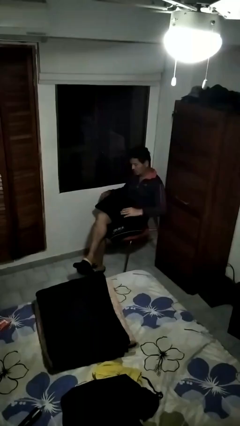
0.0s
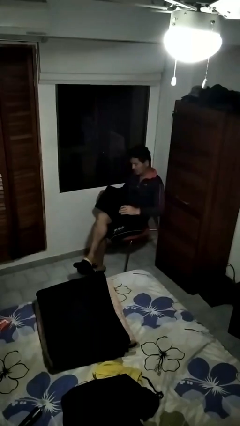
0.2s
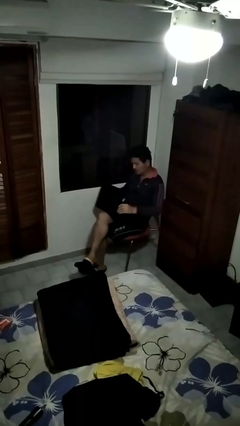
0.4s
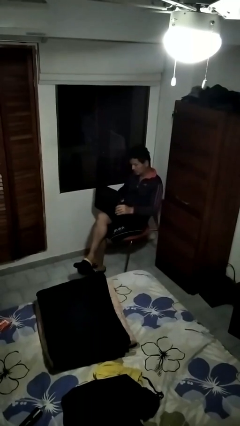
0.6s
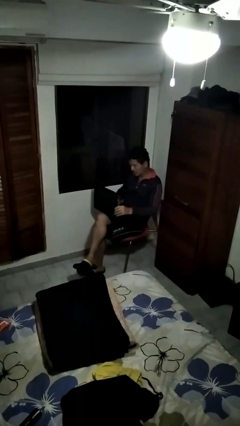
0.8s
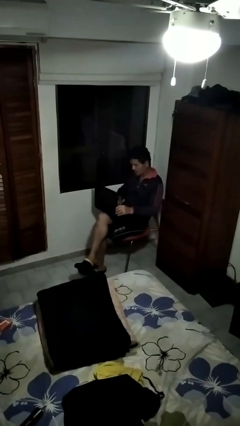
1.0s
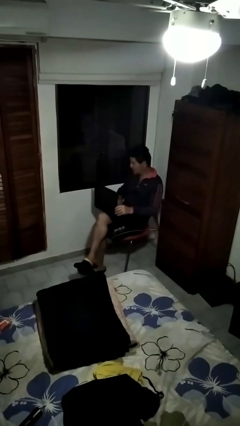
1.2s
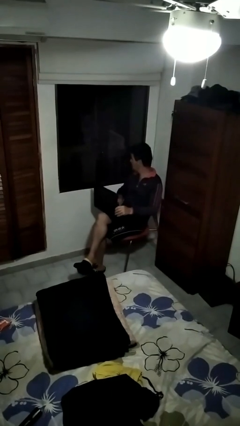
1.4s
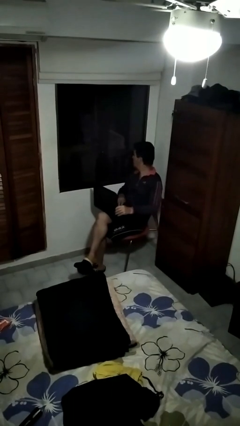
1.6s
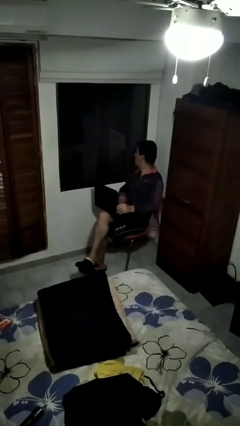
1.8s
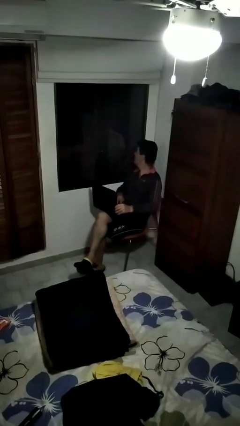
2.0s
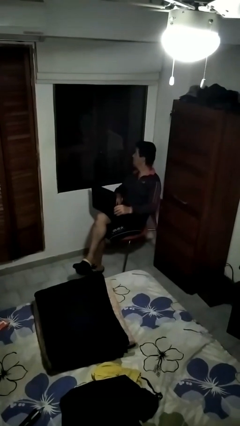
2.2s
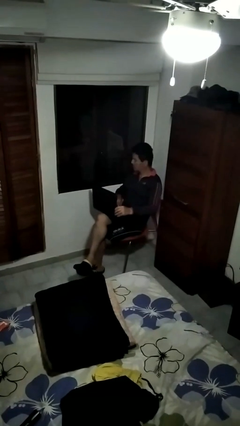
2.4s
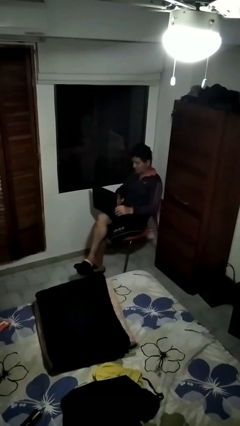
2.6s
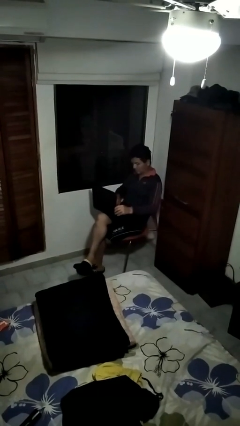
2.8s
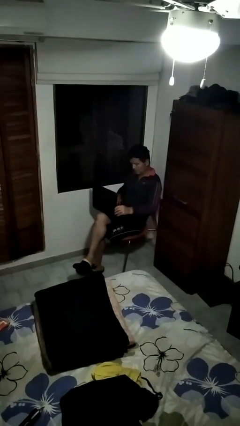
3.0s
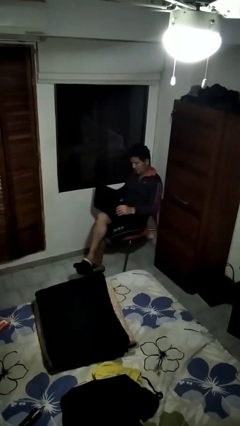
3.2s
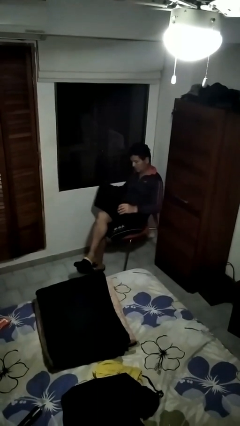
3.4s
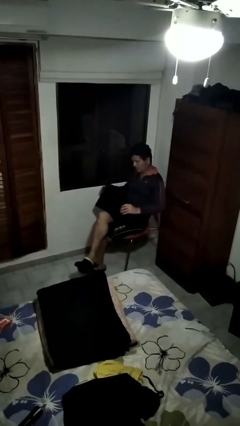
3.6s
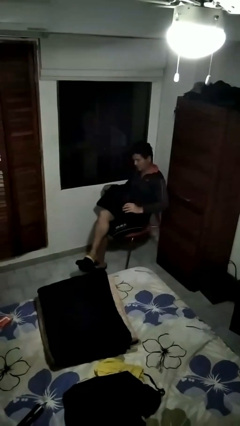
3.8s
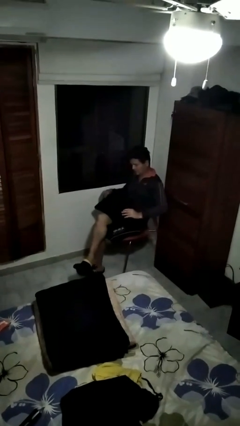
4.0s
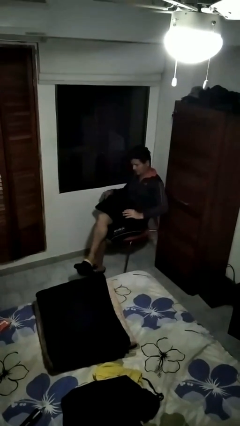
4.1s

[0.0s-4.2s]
person interacts with laptop

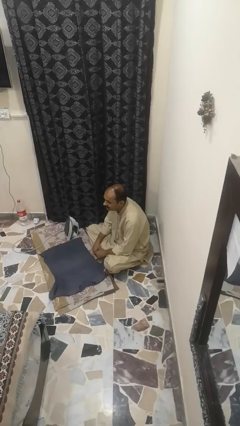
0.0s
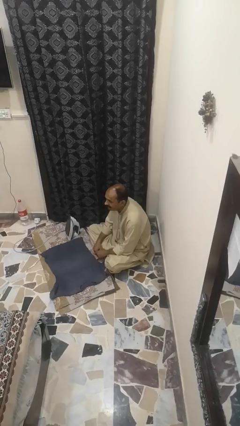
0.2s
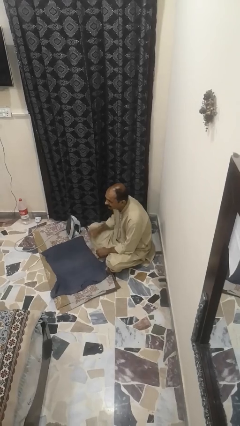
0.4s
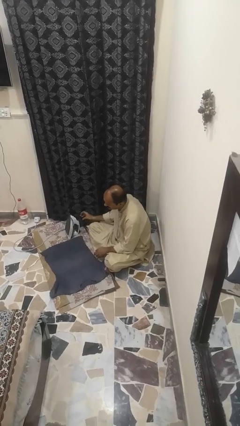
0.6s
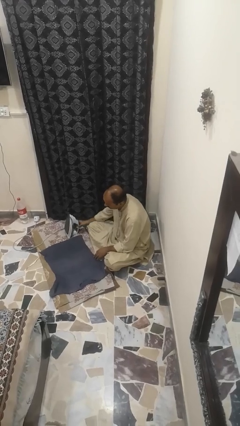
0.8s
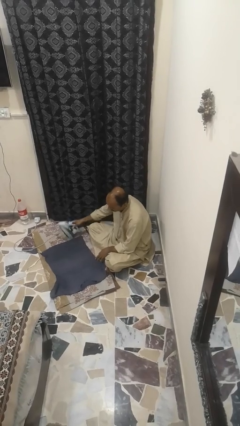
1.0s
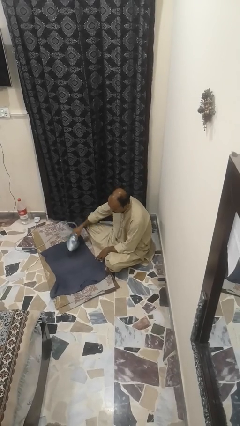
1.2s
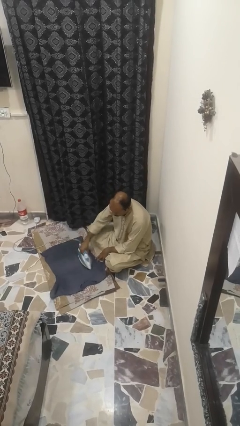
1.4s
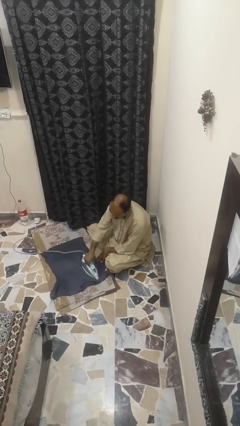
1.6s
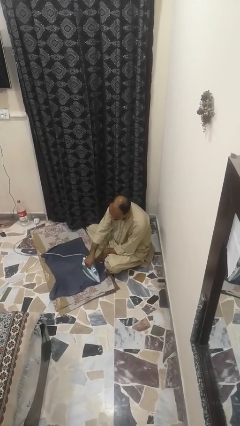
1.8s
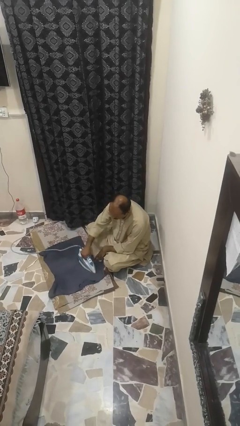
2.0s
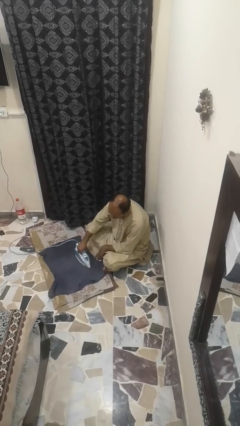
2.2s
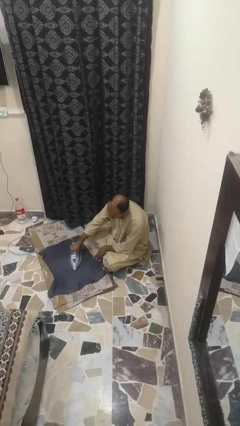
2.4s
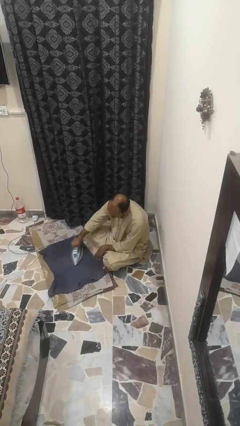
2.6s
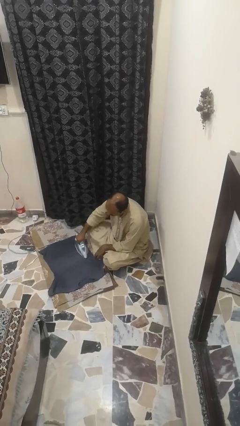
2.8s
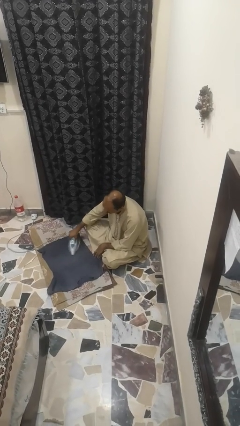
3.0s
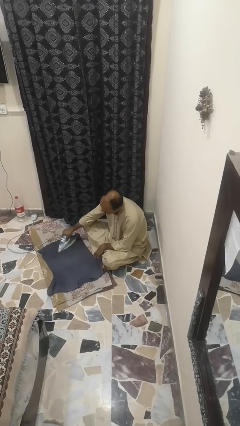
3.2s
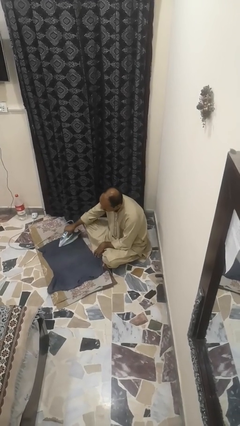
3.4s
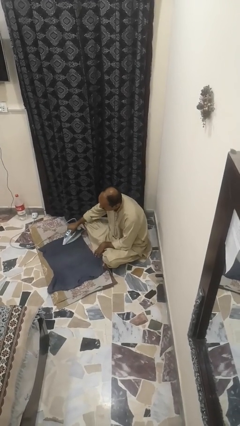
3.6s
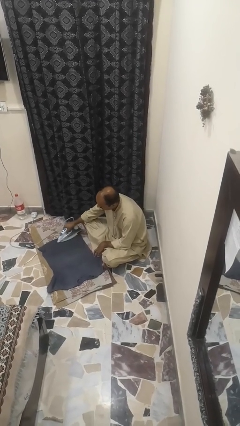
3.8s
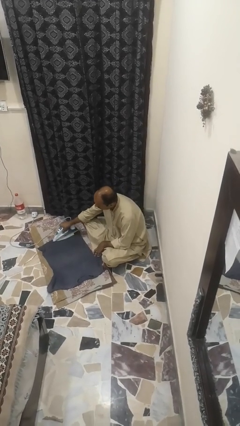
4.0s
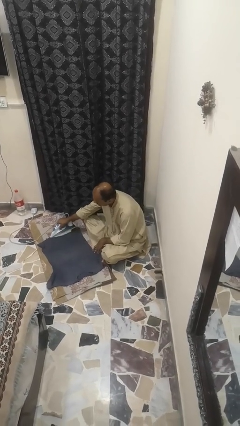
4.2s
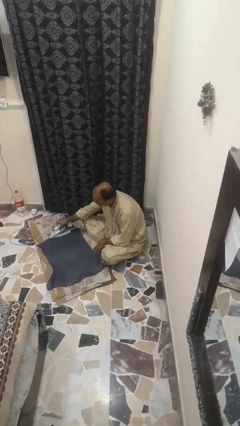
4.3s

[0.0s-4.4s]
person irons clothes

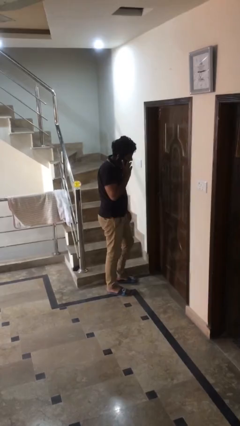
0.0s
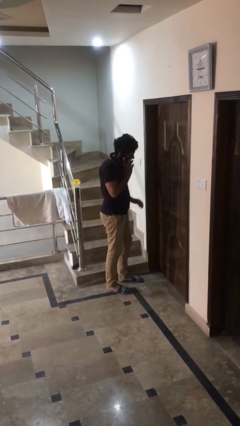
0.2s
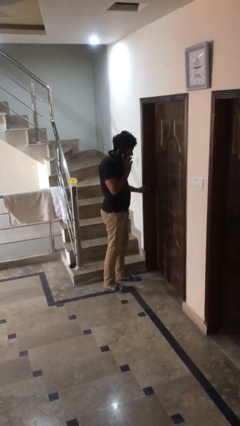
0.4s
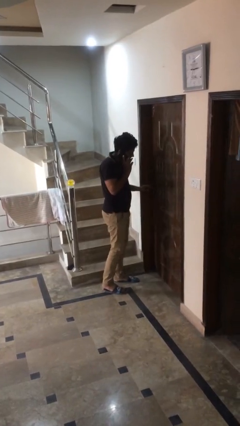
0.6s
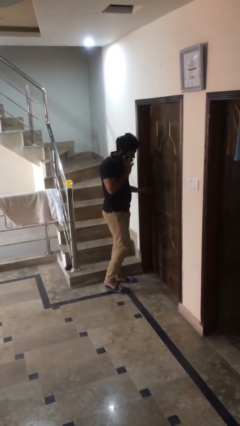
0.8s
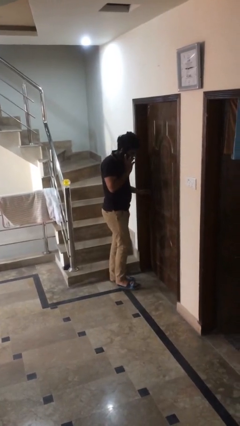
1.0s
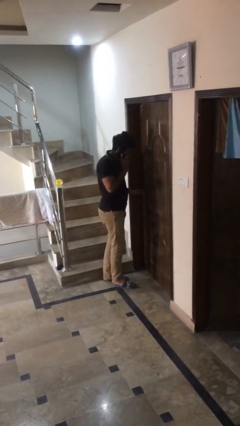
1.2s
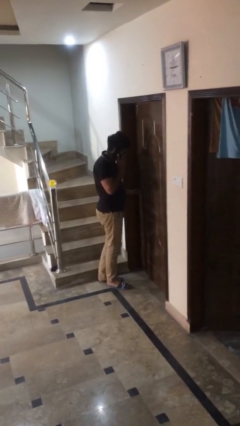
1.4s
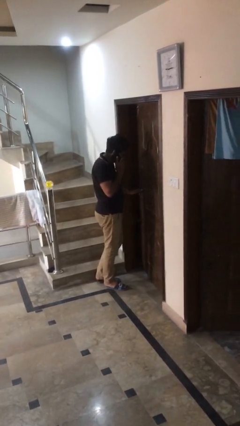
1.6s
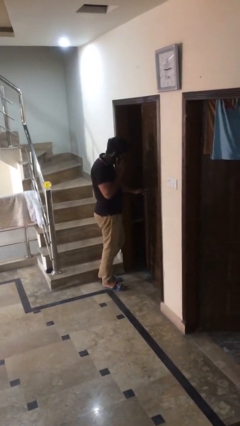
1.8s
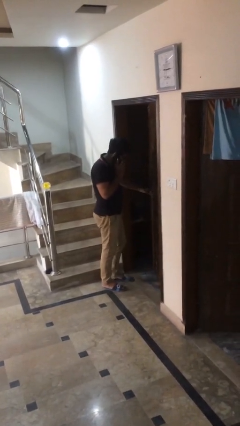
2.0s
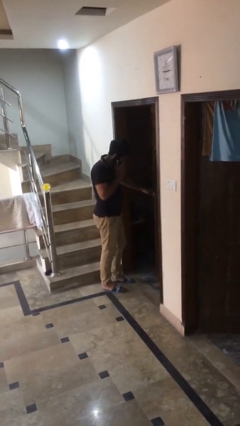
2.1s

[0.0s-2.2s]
person opens facility door

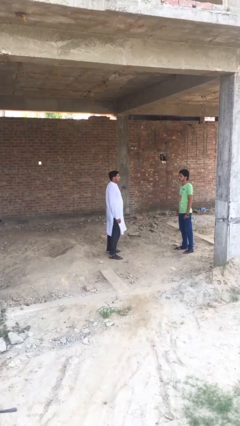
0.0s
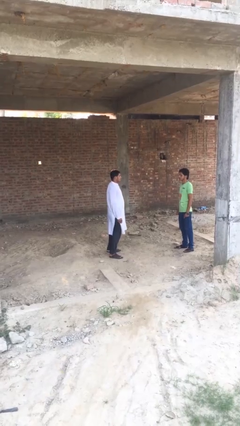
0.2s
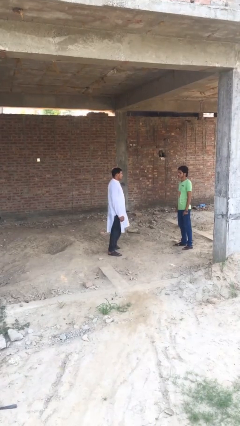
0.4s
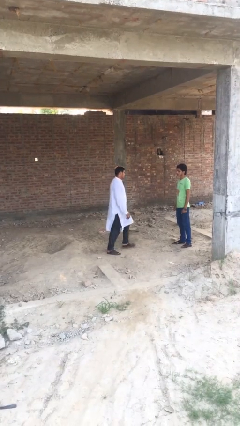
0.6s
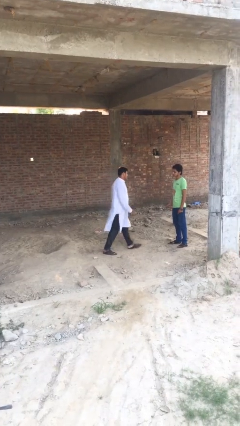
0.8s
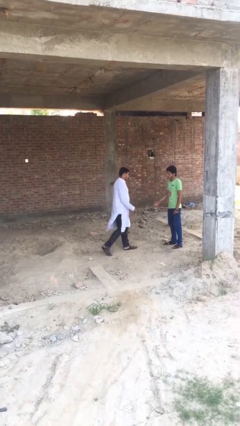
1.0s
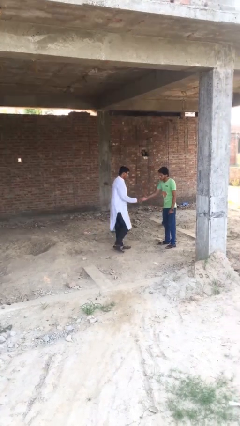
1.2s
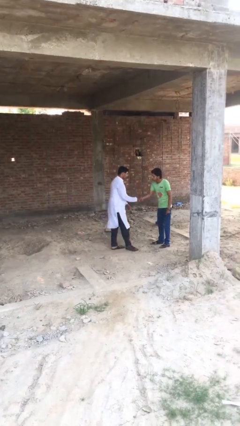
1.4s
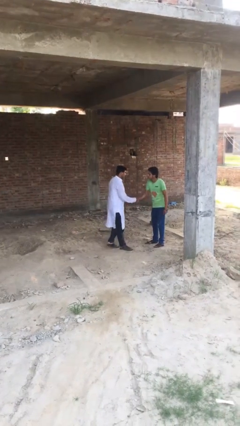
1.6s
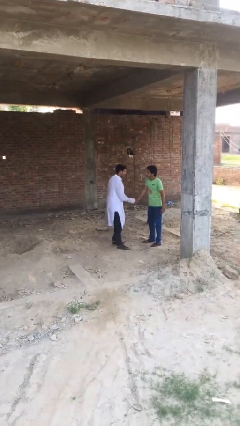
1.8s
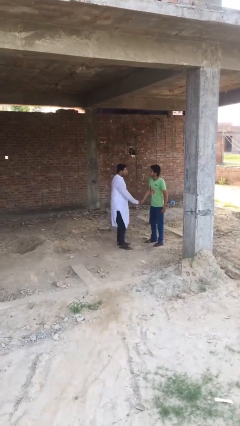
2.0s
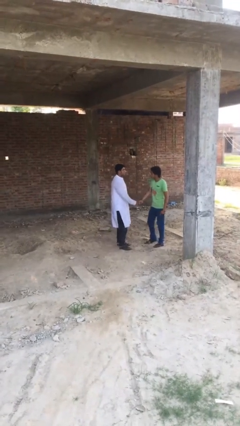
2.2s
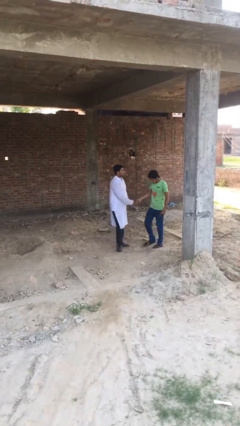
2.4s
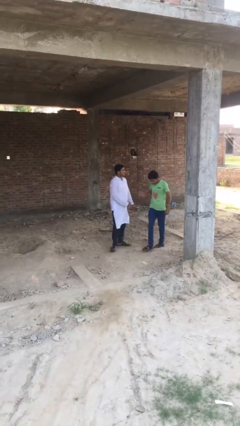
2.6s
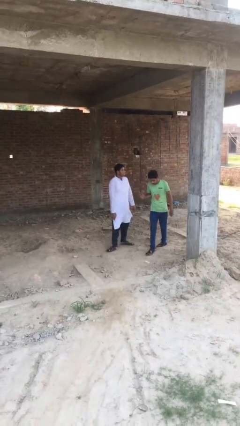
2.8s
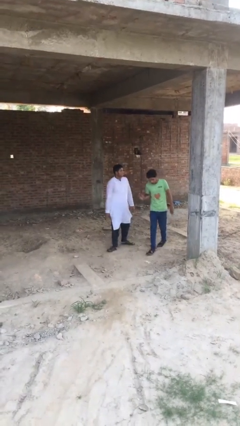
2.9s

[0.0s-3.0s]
person shakes hand

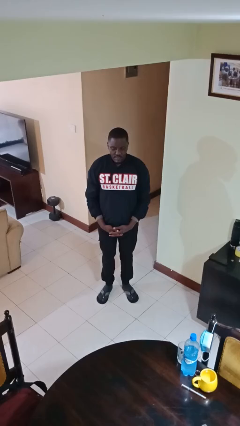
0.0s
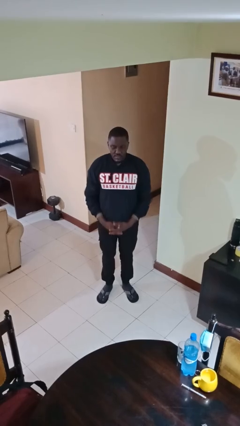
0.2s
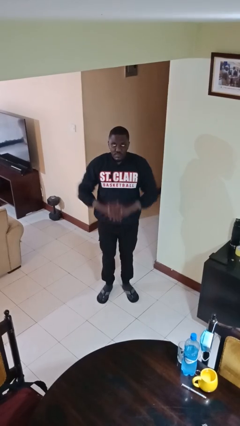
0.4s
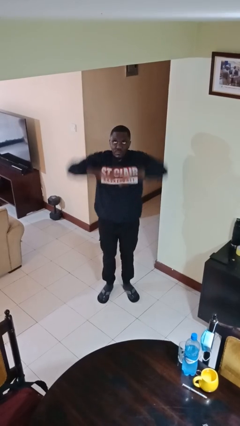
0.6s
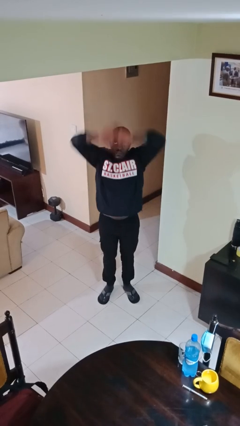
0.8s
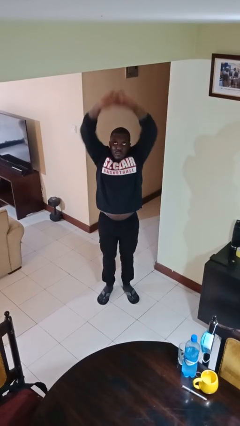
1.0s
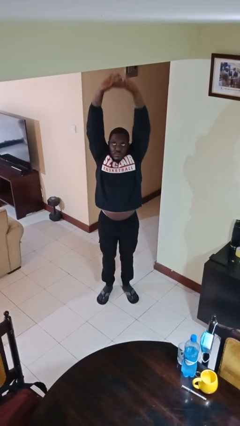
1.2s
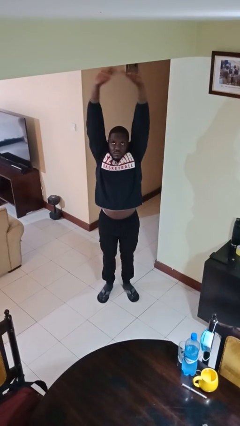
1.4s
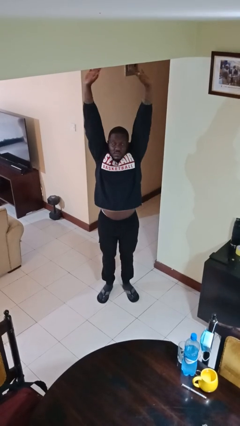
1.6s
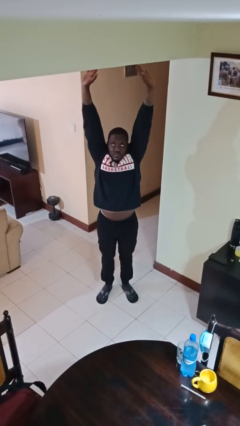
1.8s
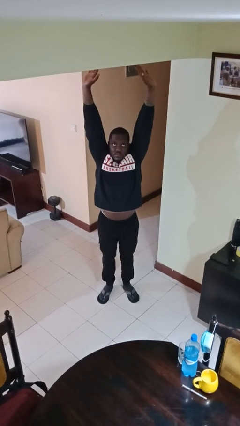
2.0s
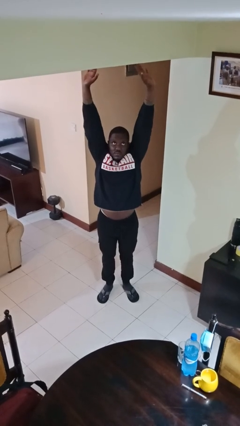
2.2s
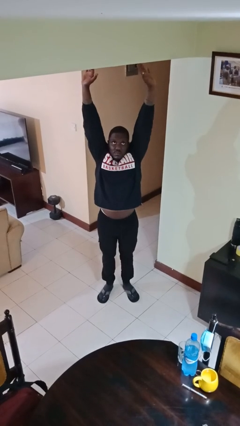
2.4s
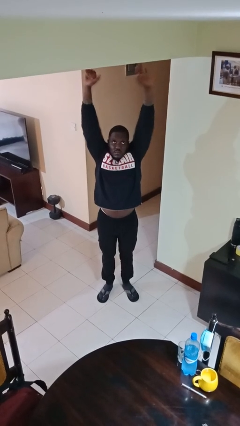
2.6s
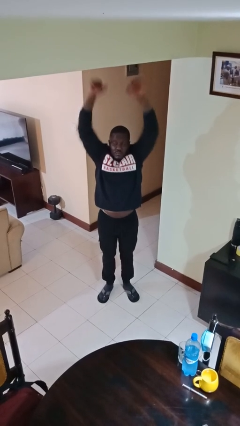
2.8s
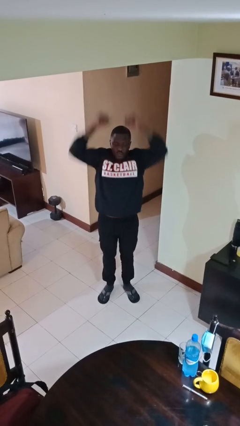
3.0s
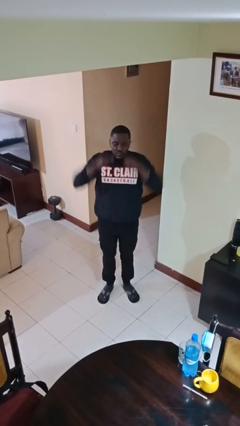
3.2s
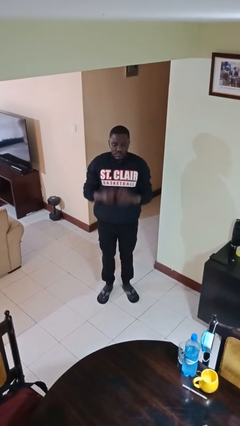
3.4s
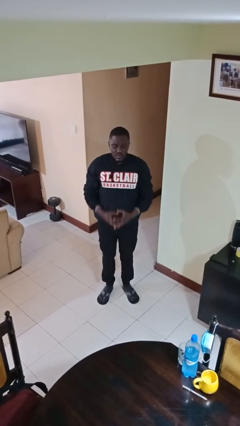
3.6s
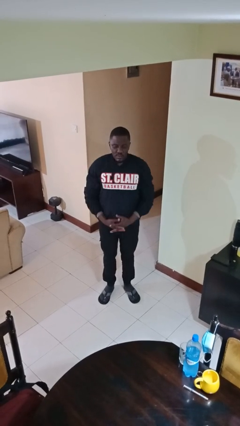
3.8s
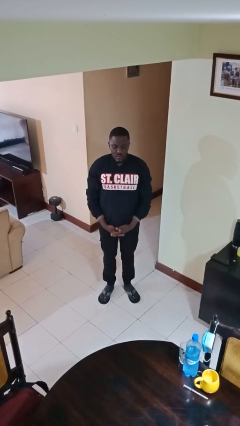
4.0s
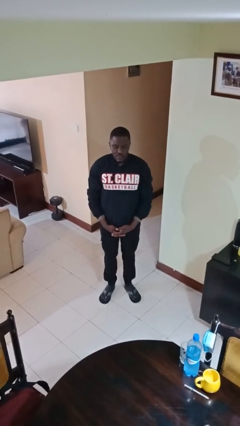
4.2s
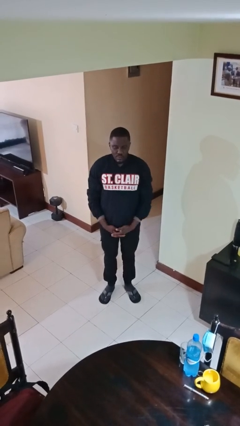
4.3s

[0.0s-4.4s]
person stretches arms over head
